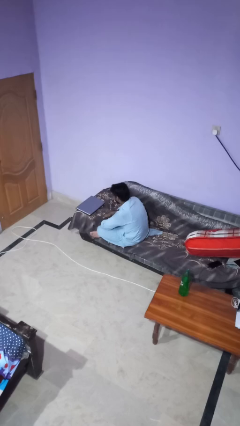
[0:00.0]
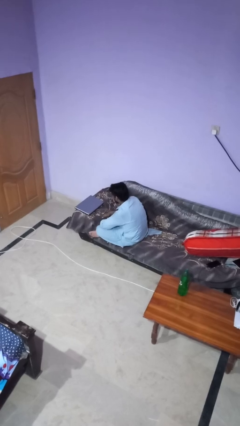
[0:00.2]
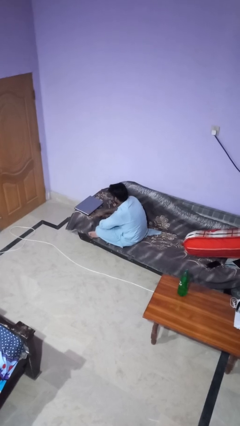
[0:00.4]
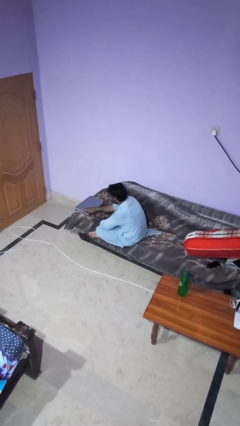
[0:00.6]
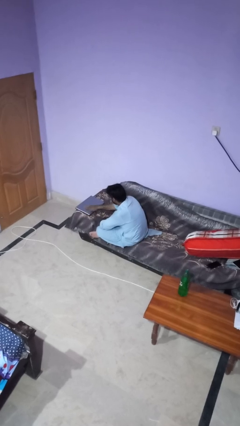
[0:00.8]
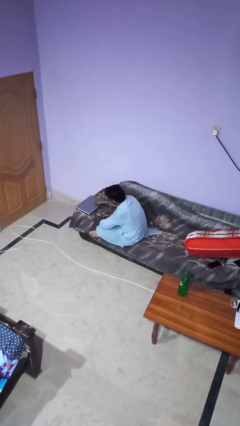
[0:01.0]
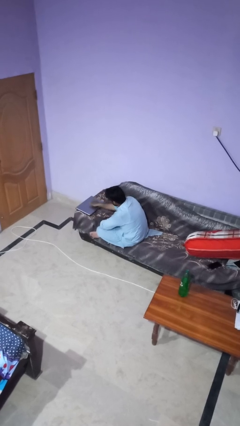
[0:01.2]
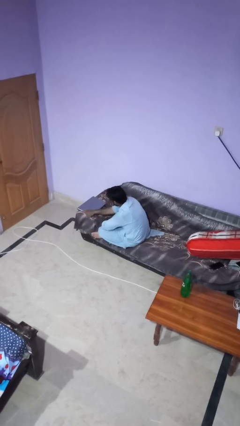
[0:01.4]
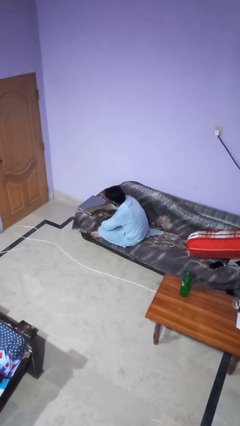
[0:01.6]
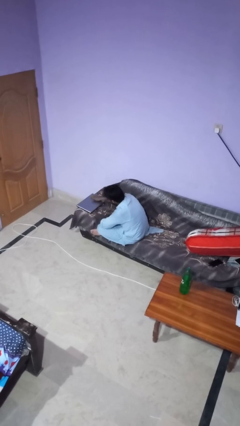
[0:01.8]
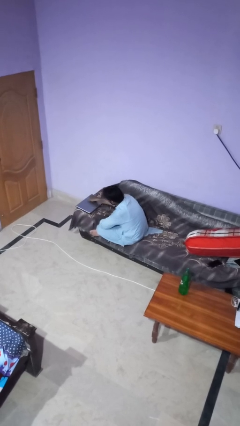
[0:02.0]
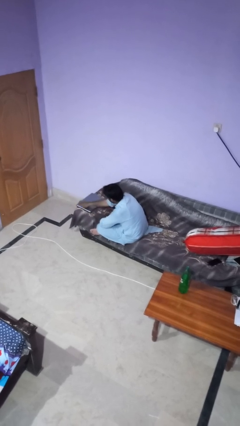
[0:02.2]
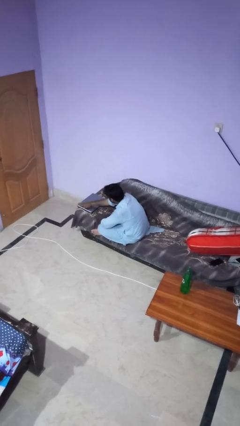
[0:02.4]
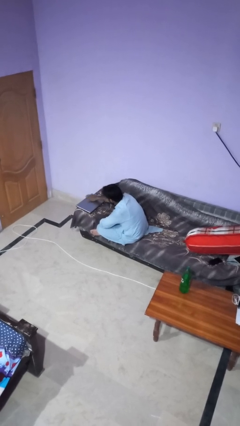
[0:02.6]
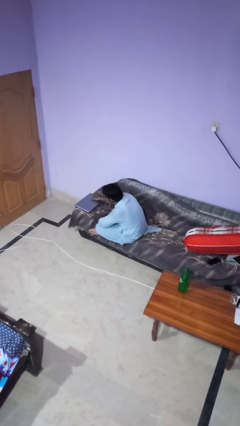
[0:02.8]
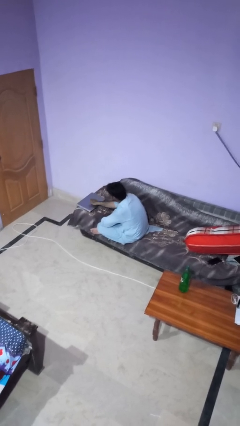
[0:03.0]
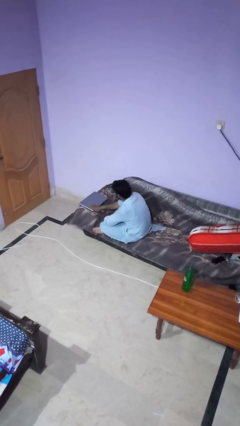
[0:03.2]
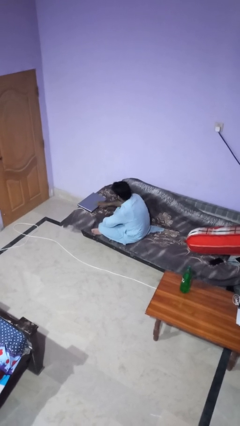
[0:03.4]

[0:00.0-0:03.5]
person waves hand over object

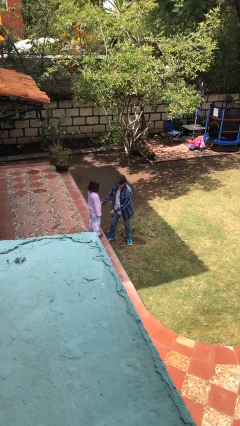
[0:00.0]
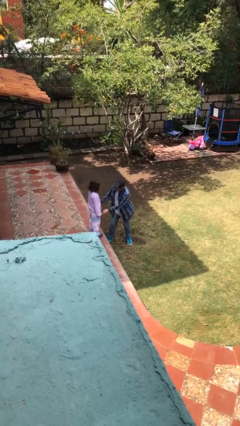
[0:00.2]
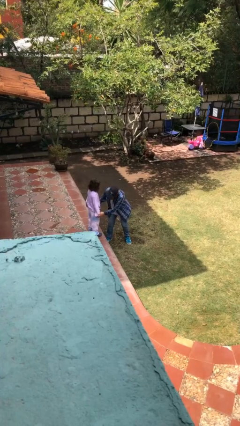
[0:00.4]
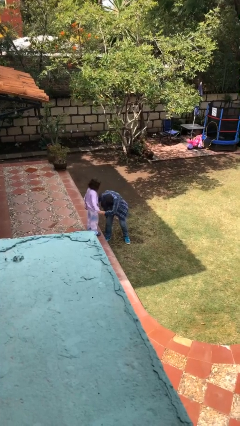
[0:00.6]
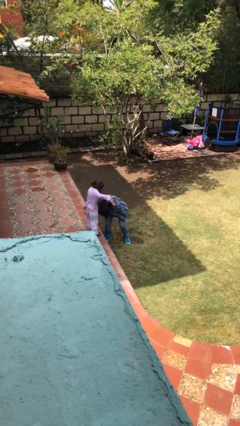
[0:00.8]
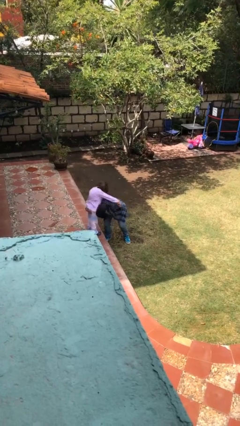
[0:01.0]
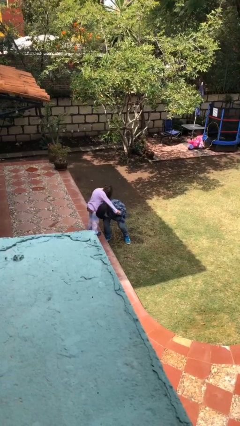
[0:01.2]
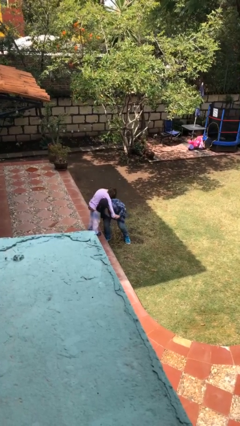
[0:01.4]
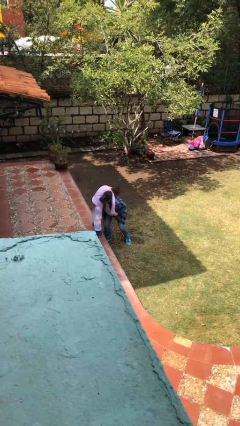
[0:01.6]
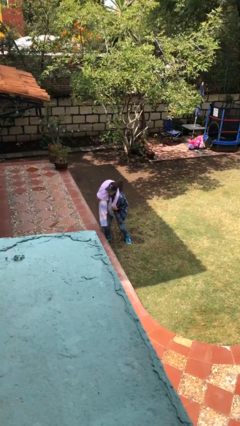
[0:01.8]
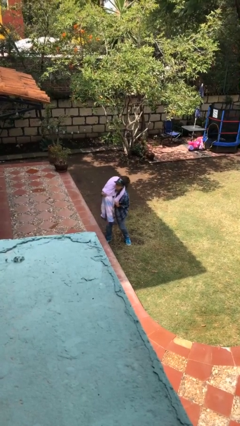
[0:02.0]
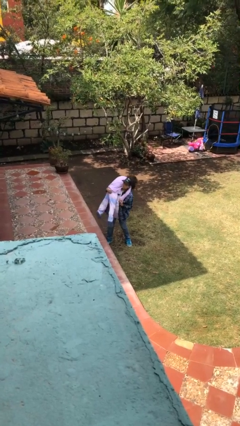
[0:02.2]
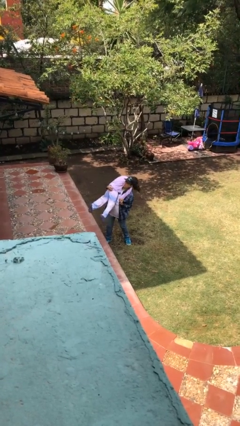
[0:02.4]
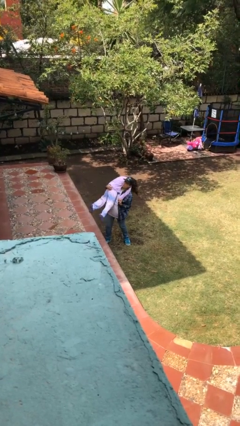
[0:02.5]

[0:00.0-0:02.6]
person carries person over shoulder

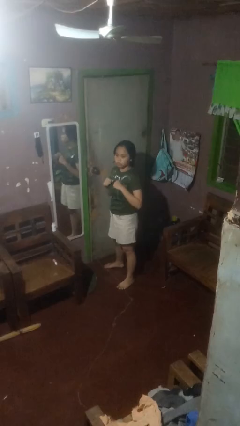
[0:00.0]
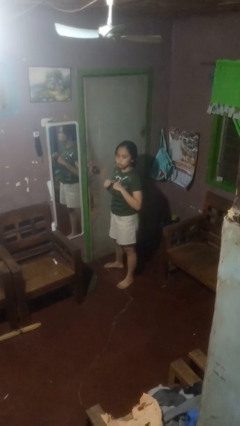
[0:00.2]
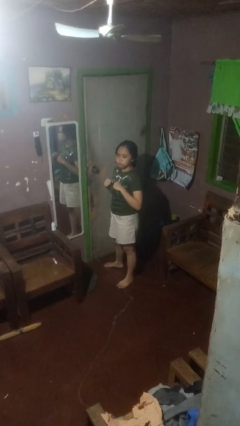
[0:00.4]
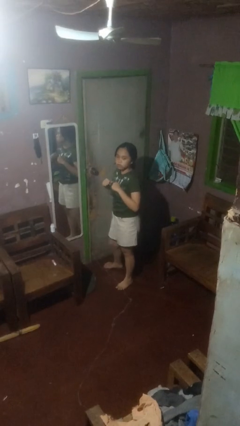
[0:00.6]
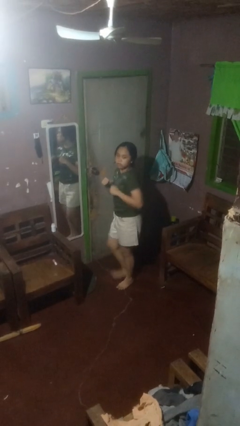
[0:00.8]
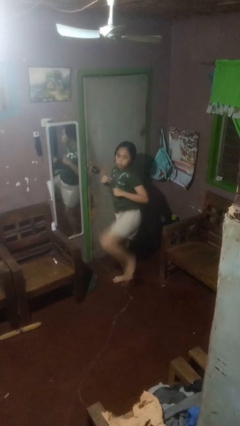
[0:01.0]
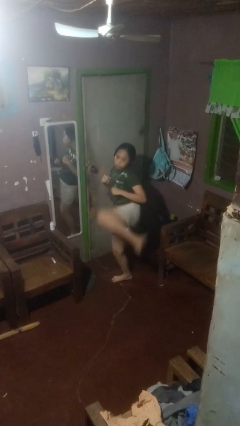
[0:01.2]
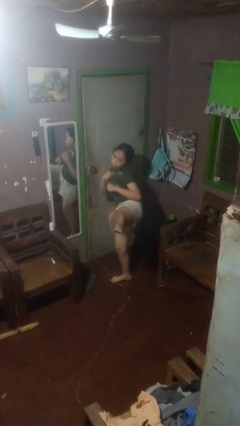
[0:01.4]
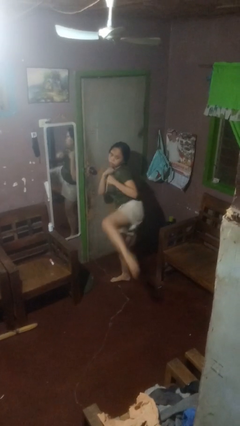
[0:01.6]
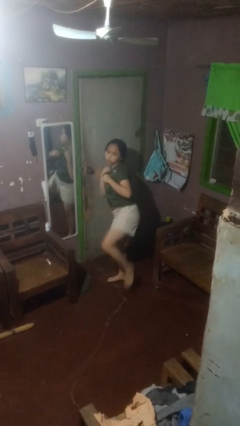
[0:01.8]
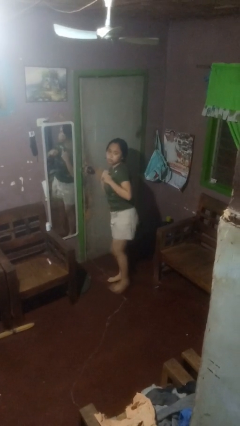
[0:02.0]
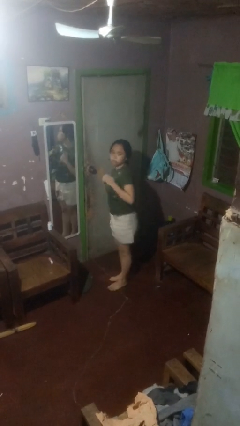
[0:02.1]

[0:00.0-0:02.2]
person karate kicks

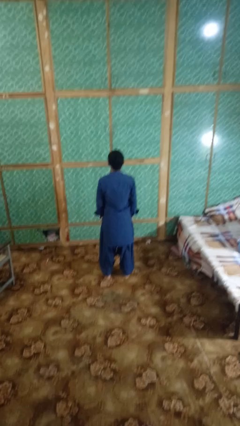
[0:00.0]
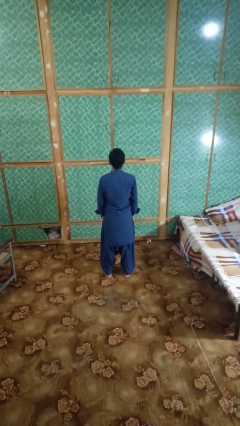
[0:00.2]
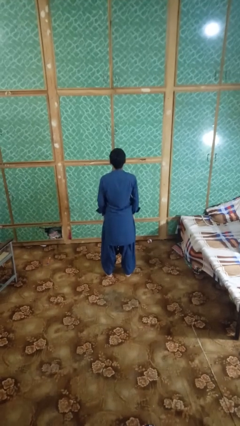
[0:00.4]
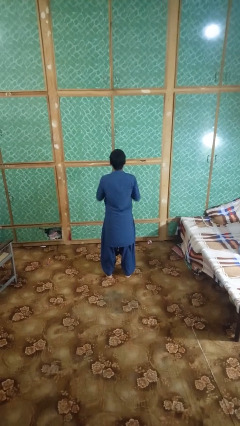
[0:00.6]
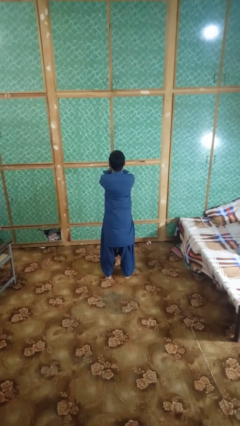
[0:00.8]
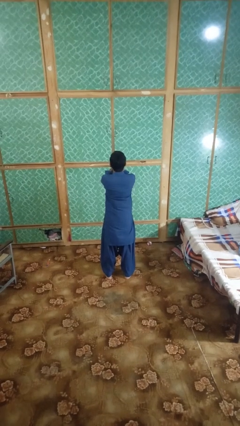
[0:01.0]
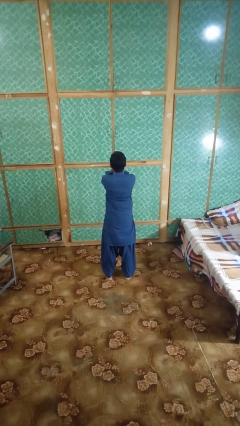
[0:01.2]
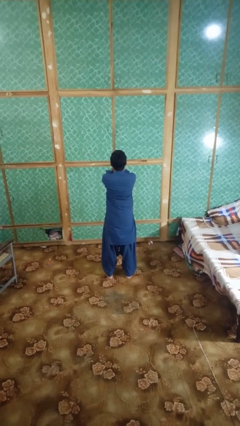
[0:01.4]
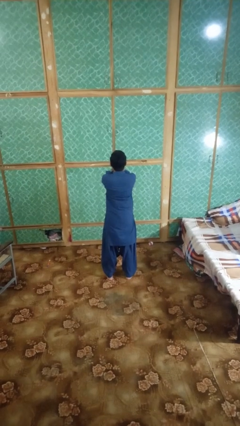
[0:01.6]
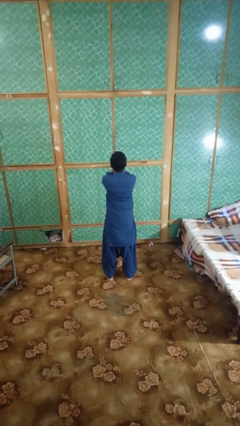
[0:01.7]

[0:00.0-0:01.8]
person covers face with hands

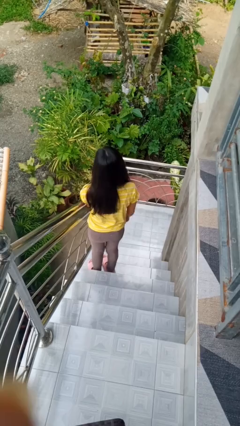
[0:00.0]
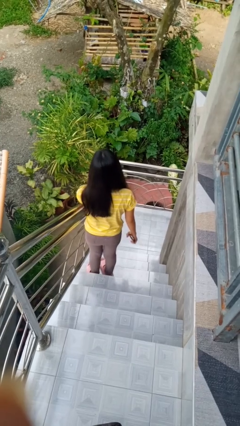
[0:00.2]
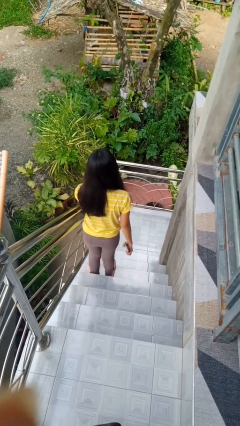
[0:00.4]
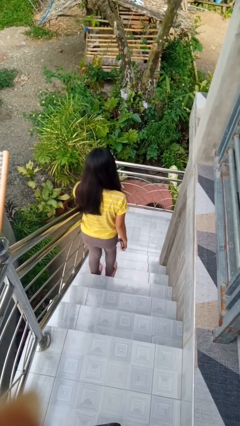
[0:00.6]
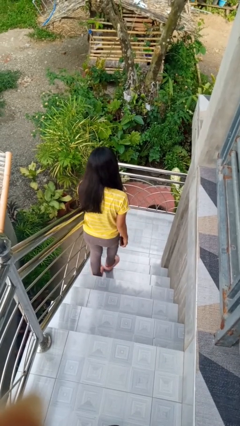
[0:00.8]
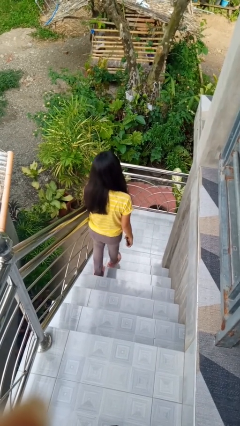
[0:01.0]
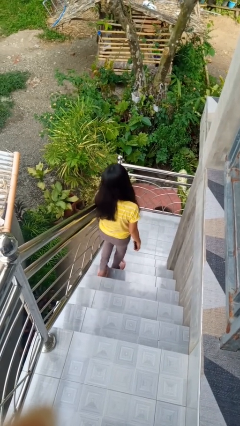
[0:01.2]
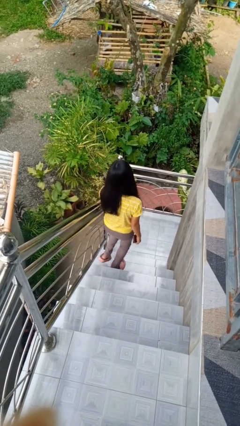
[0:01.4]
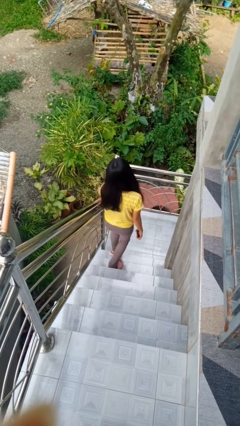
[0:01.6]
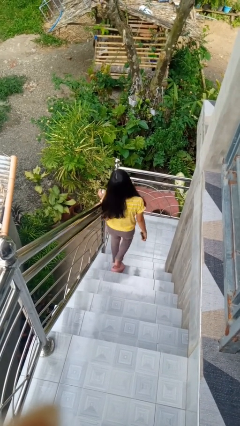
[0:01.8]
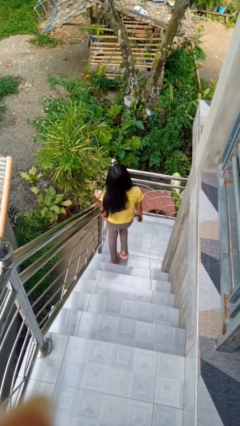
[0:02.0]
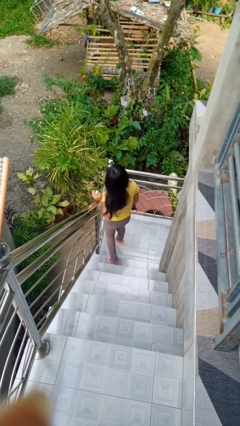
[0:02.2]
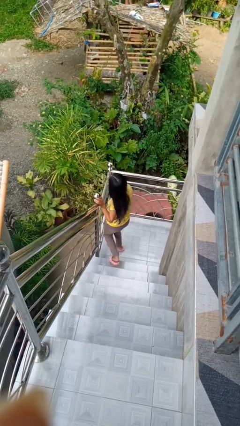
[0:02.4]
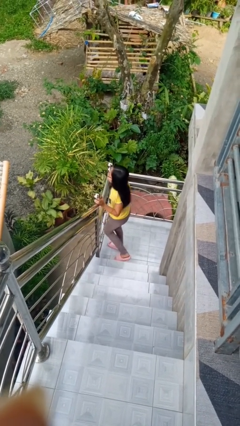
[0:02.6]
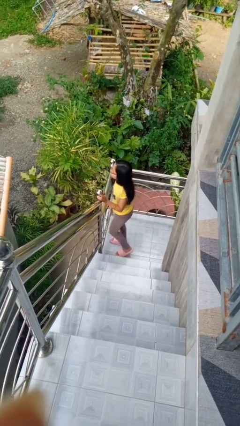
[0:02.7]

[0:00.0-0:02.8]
person climbs down stairs

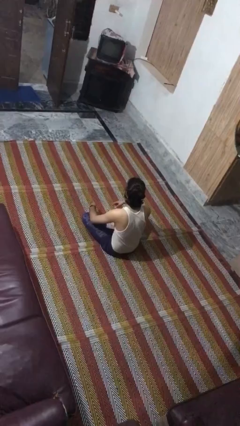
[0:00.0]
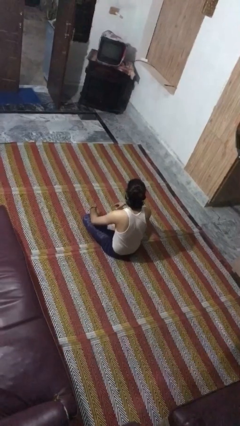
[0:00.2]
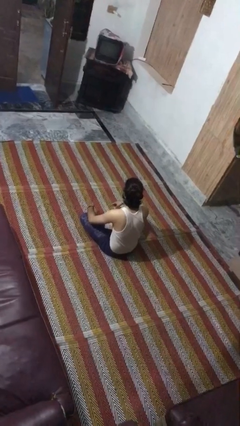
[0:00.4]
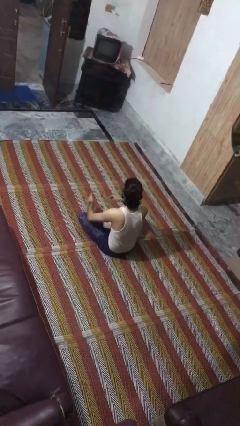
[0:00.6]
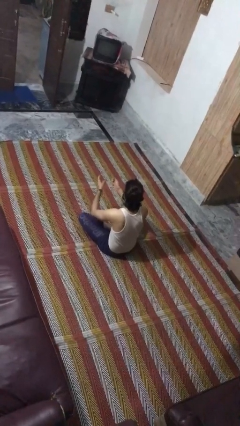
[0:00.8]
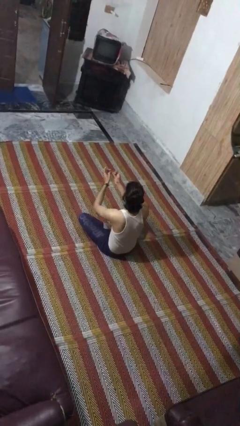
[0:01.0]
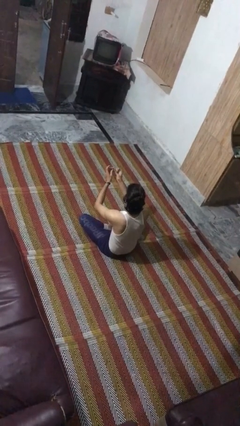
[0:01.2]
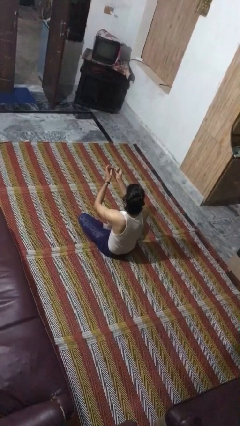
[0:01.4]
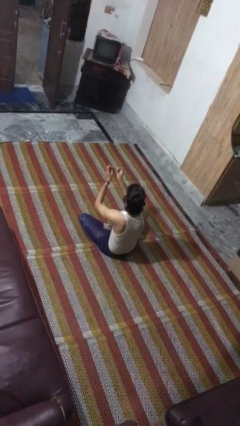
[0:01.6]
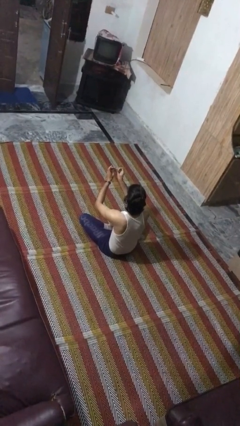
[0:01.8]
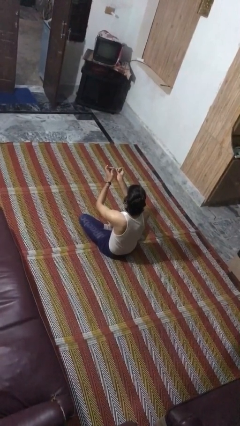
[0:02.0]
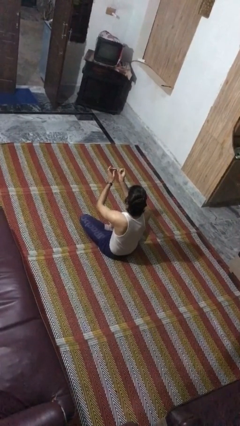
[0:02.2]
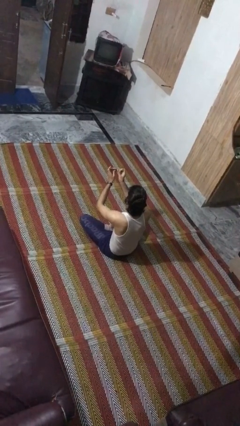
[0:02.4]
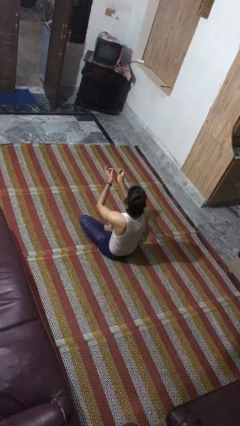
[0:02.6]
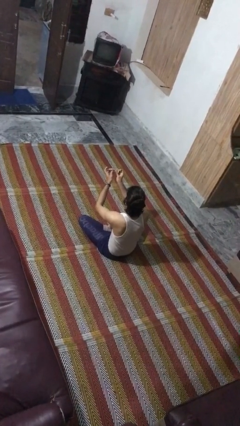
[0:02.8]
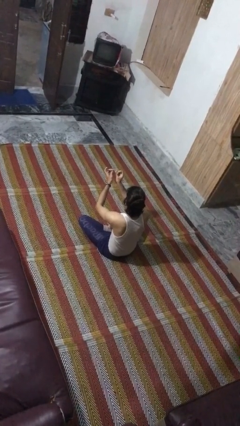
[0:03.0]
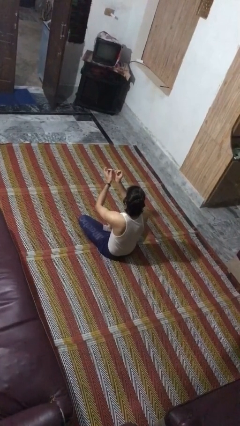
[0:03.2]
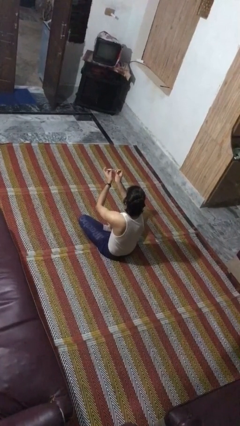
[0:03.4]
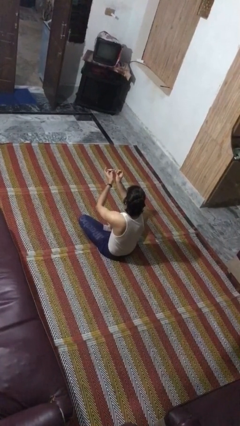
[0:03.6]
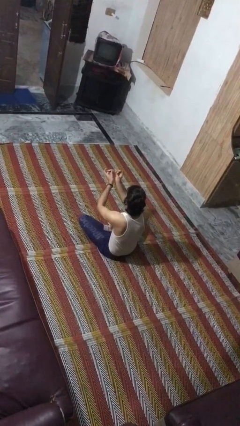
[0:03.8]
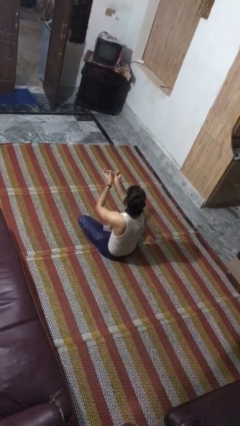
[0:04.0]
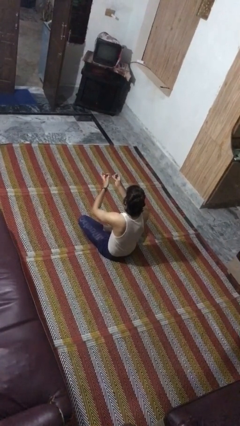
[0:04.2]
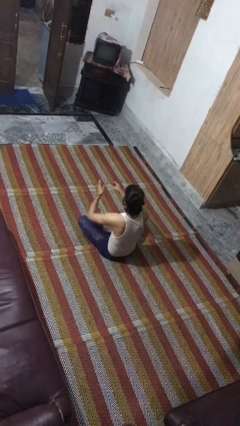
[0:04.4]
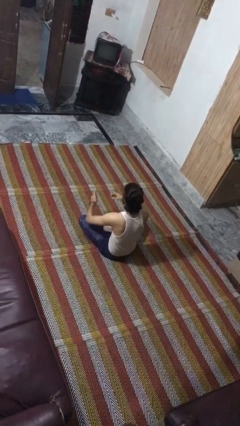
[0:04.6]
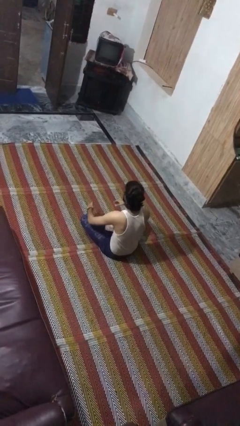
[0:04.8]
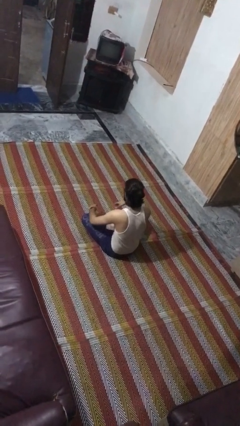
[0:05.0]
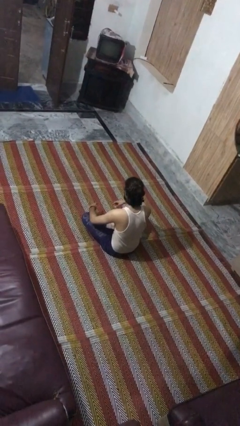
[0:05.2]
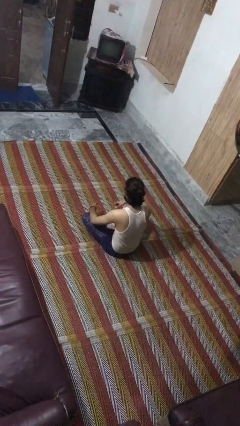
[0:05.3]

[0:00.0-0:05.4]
person clips fingernails
